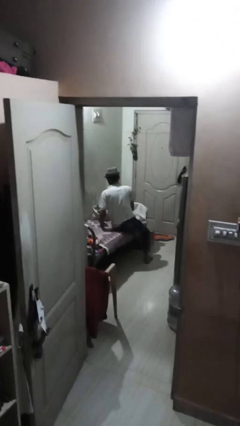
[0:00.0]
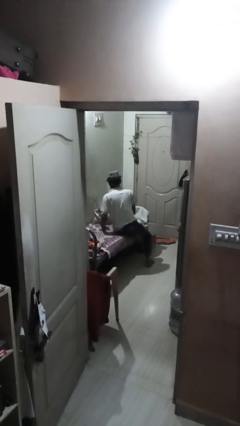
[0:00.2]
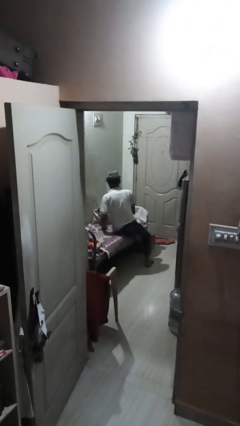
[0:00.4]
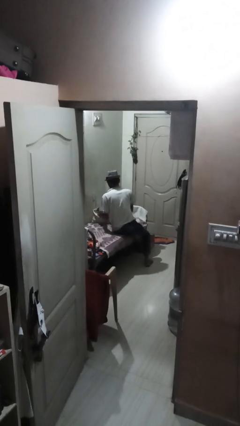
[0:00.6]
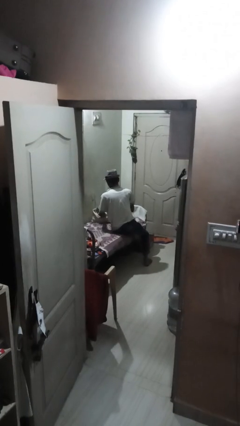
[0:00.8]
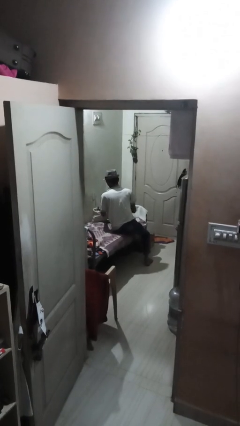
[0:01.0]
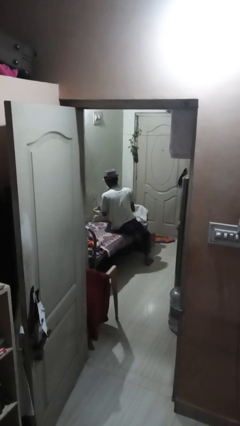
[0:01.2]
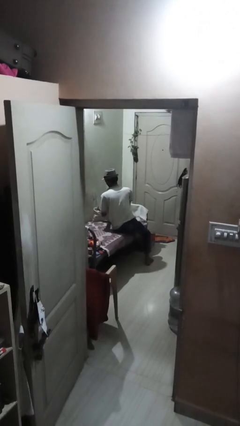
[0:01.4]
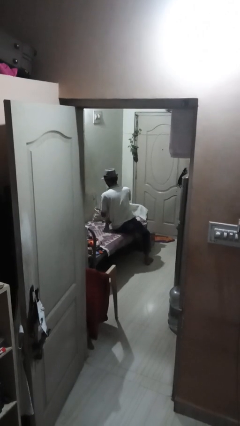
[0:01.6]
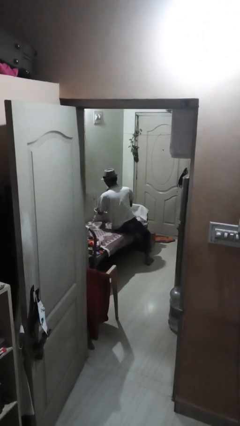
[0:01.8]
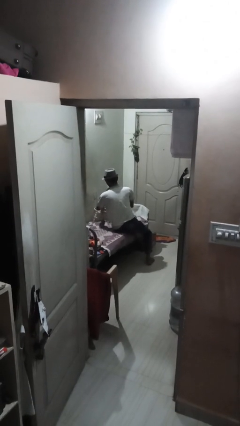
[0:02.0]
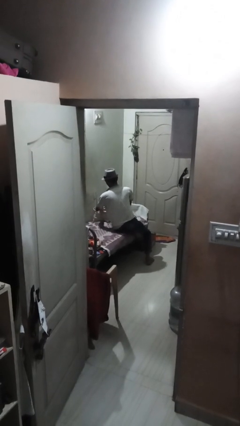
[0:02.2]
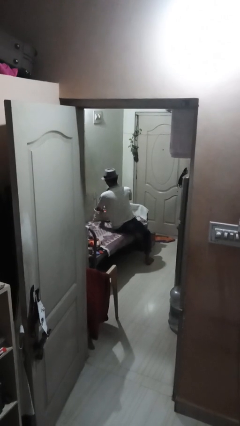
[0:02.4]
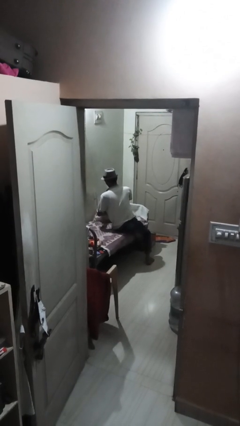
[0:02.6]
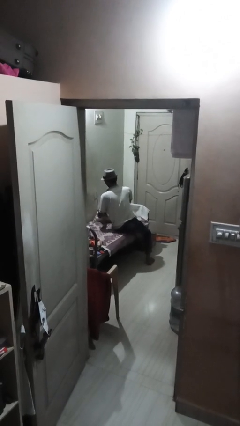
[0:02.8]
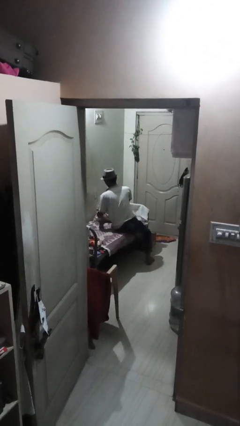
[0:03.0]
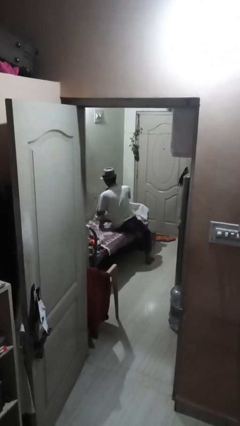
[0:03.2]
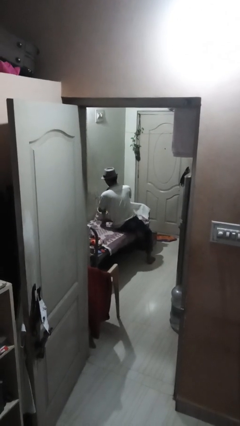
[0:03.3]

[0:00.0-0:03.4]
person searches in bag

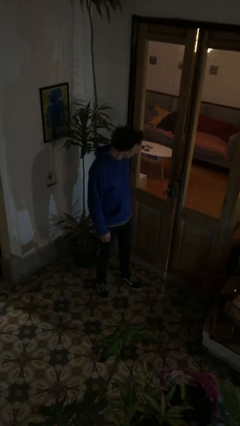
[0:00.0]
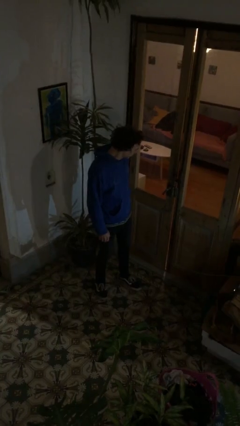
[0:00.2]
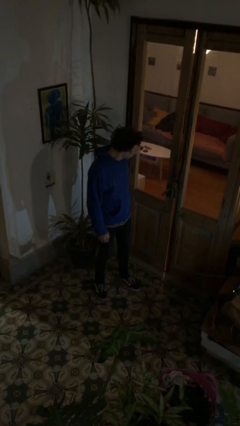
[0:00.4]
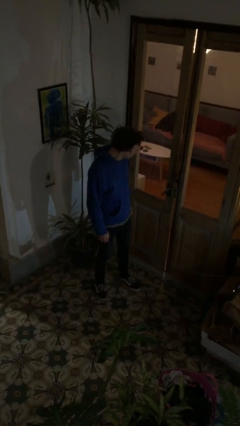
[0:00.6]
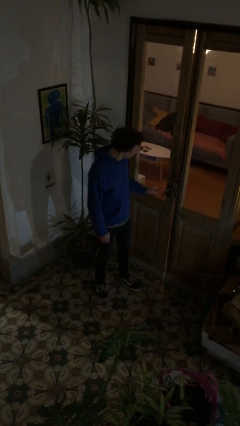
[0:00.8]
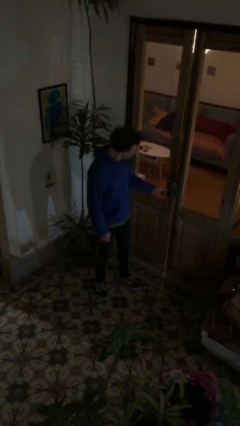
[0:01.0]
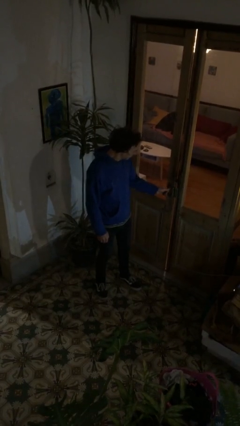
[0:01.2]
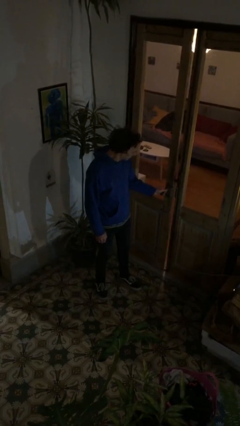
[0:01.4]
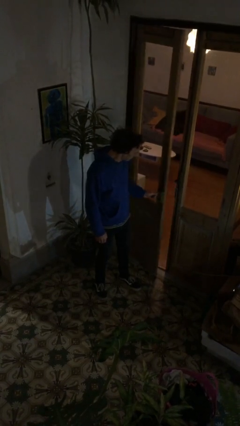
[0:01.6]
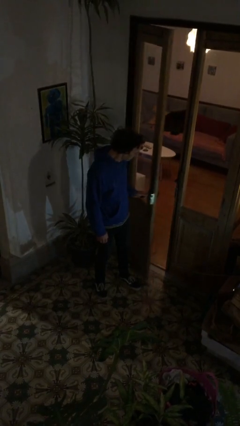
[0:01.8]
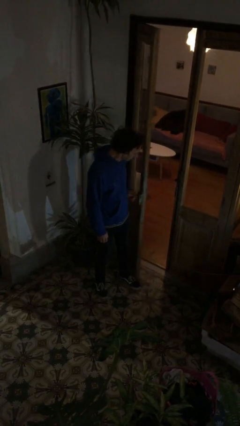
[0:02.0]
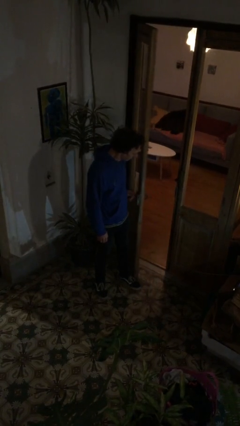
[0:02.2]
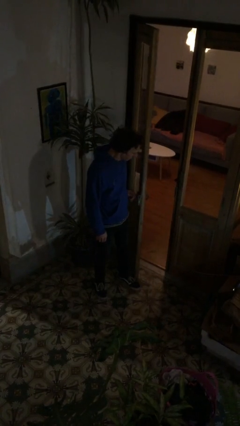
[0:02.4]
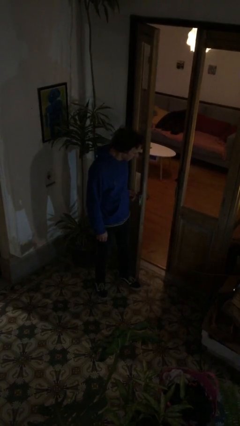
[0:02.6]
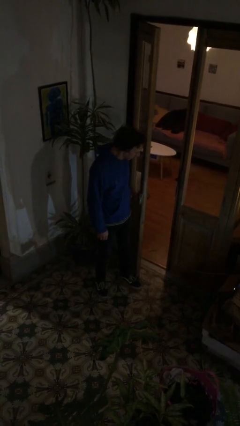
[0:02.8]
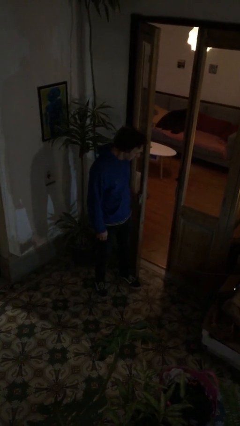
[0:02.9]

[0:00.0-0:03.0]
person opens facility door

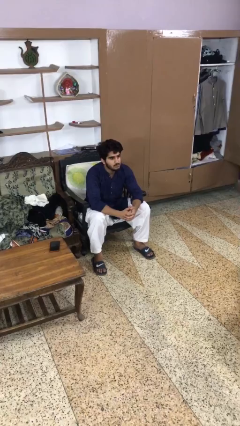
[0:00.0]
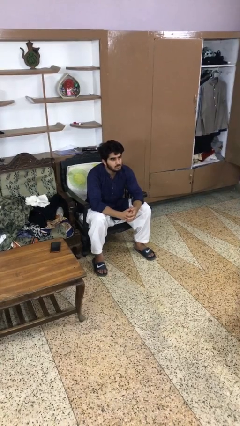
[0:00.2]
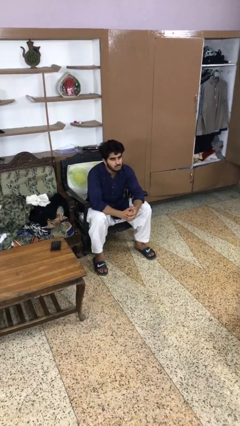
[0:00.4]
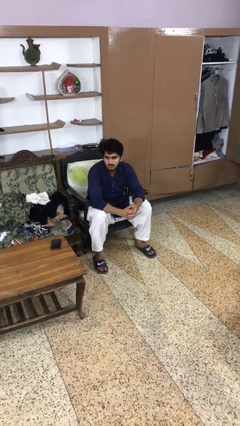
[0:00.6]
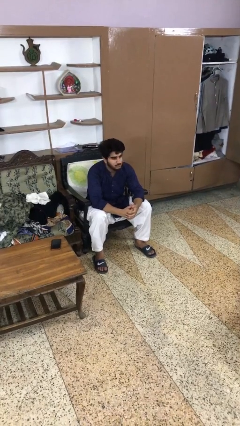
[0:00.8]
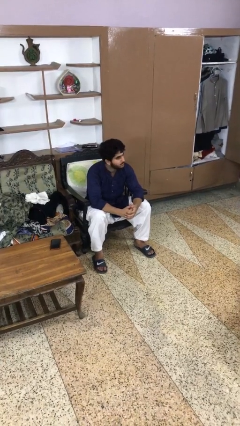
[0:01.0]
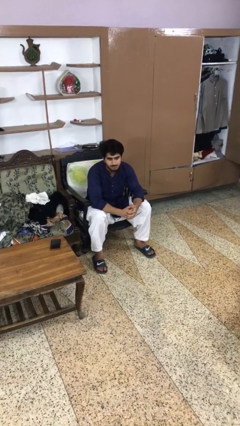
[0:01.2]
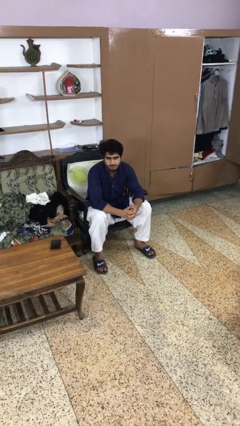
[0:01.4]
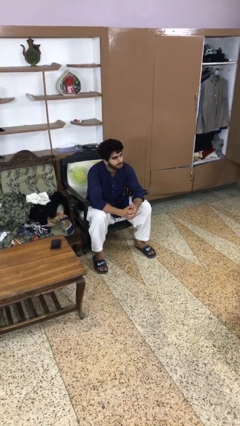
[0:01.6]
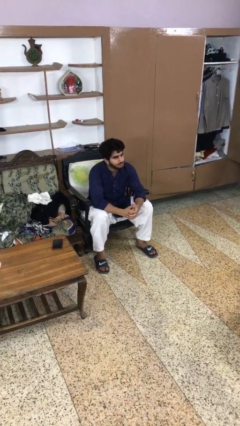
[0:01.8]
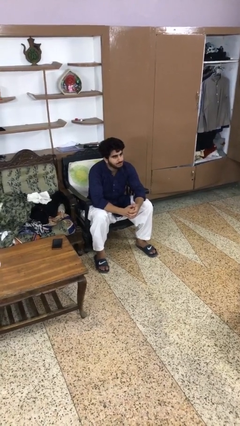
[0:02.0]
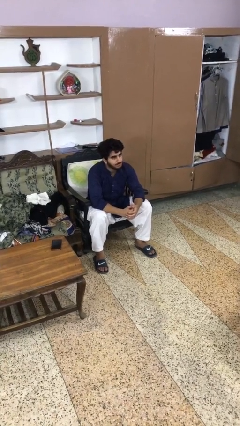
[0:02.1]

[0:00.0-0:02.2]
person shakes head

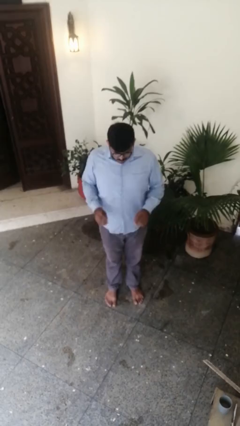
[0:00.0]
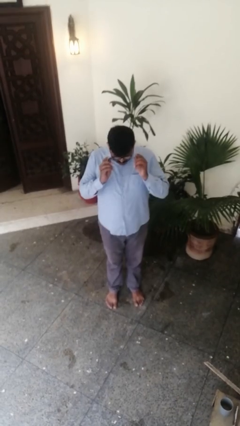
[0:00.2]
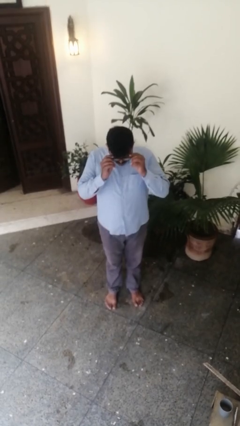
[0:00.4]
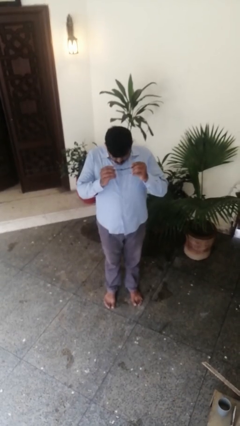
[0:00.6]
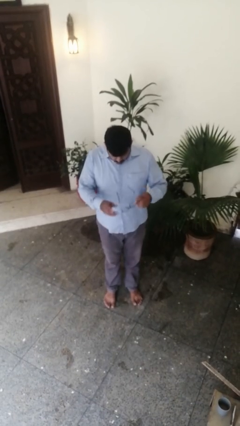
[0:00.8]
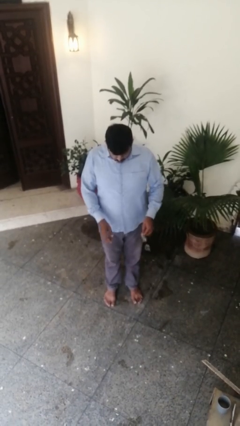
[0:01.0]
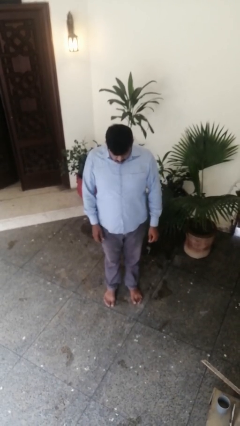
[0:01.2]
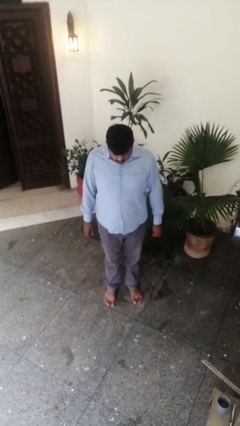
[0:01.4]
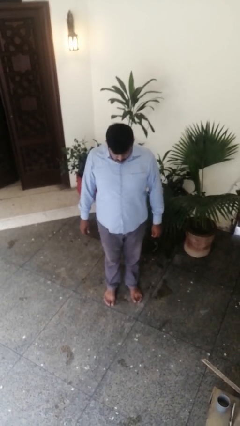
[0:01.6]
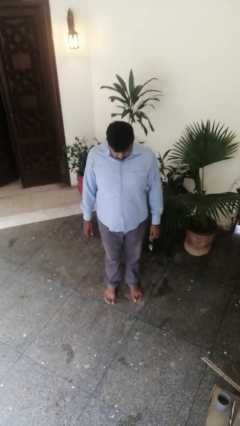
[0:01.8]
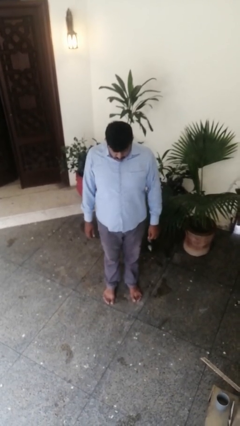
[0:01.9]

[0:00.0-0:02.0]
person takes off glasses

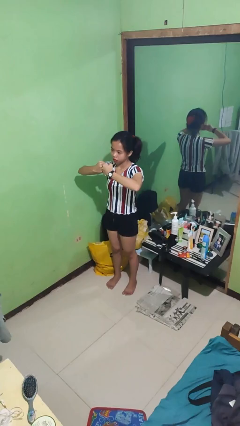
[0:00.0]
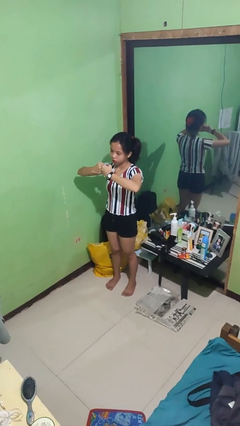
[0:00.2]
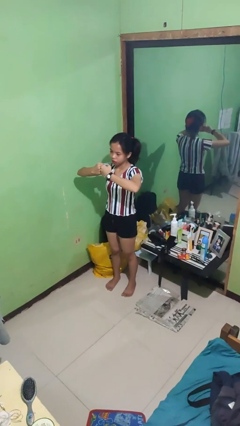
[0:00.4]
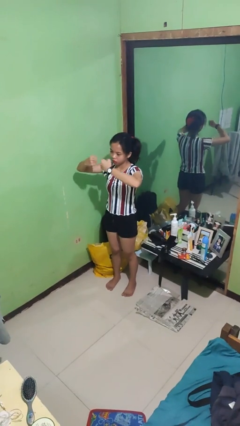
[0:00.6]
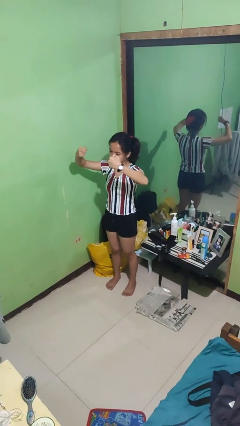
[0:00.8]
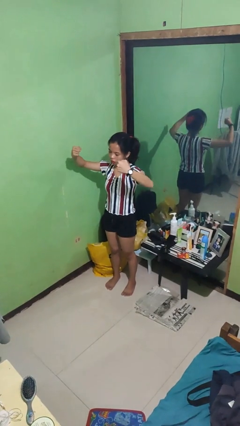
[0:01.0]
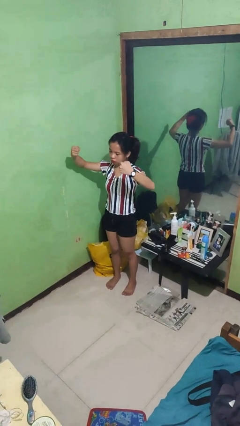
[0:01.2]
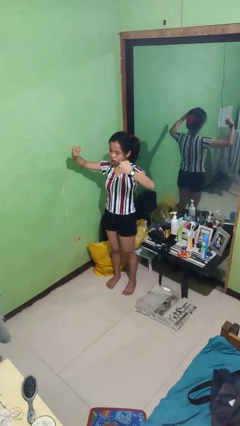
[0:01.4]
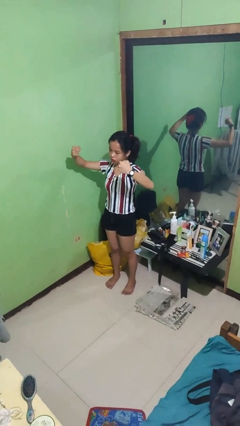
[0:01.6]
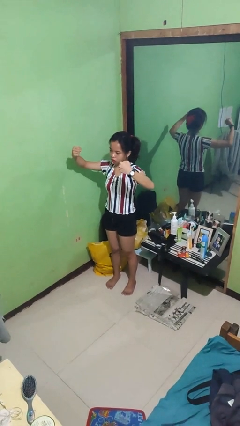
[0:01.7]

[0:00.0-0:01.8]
person gestures zoom in

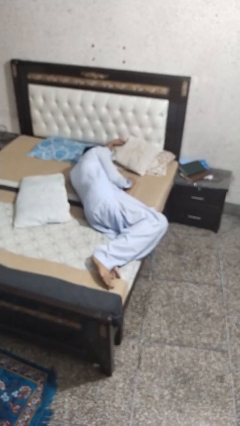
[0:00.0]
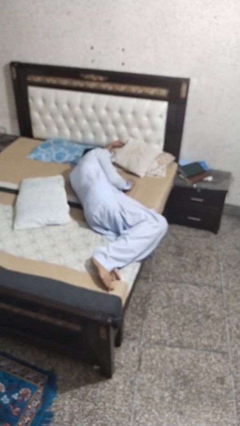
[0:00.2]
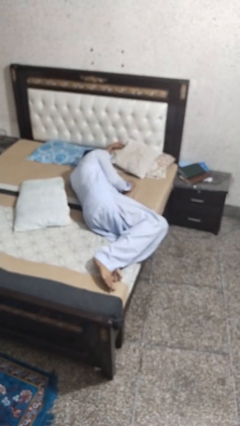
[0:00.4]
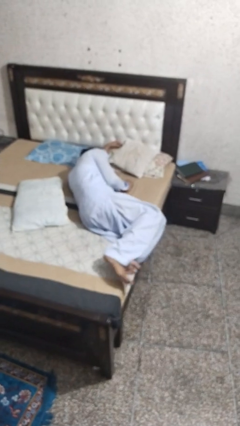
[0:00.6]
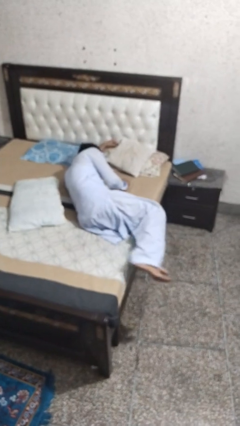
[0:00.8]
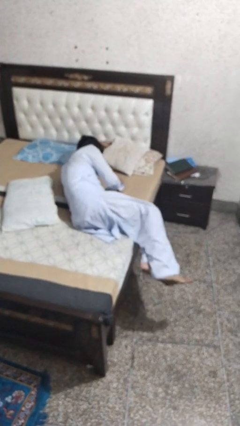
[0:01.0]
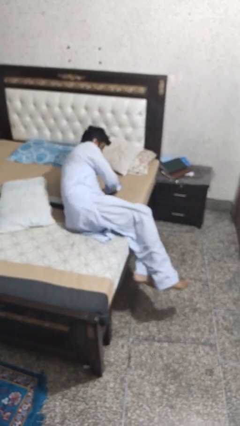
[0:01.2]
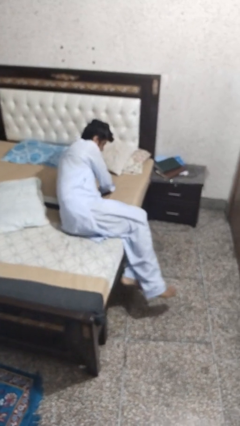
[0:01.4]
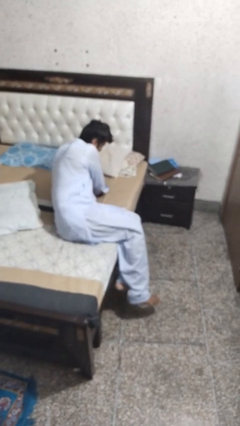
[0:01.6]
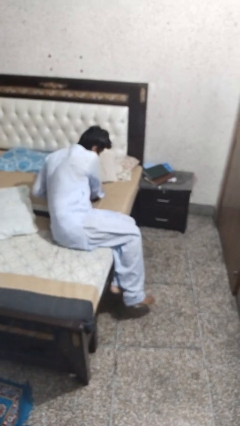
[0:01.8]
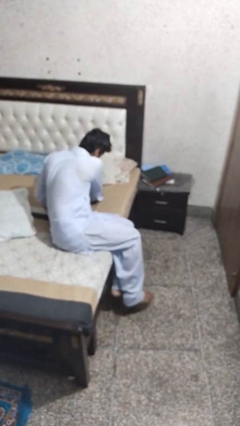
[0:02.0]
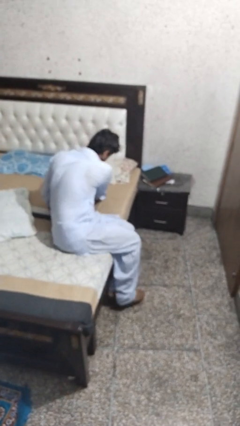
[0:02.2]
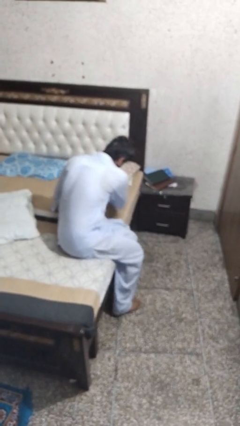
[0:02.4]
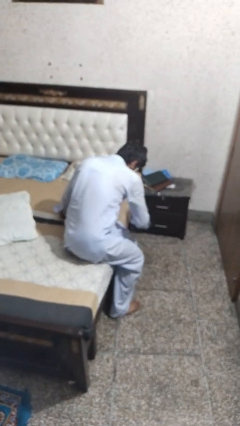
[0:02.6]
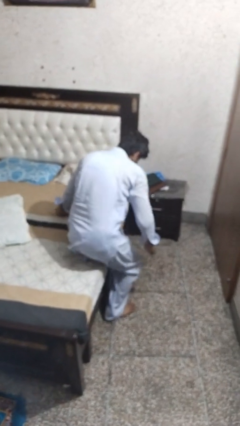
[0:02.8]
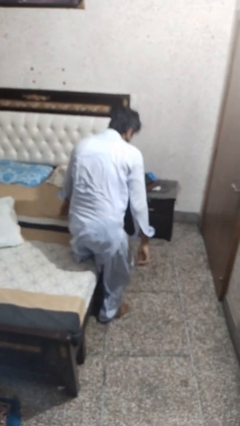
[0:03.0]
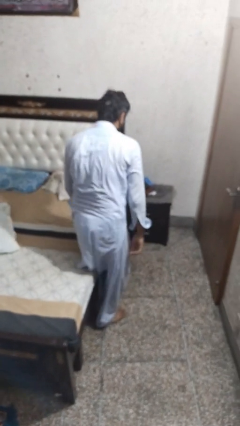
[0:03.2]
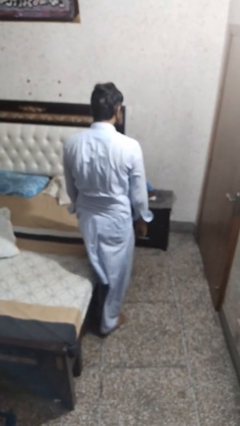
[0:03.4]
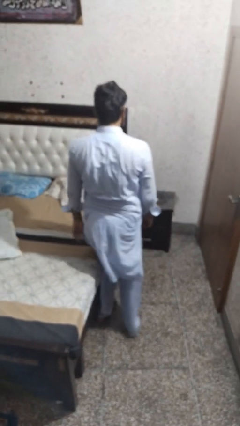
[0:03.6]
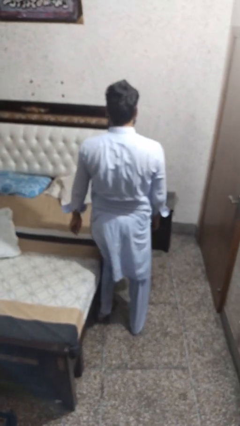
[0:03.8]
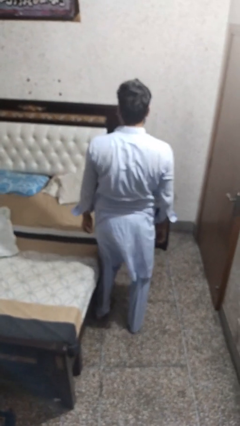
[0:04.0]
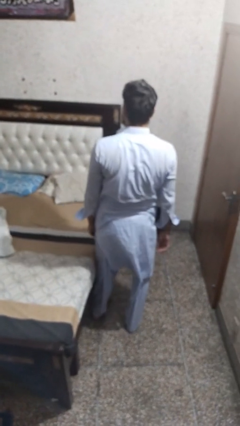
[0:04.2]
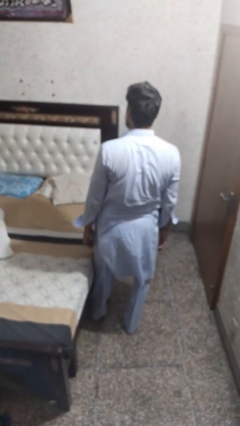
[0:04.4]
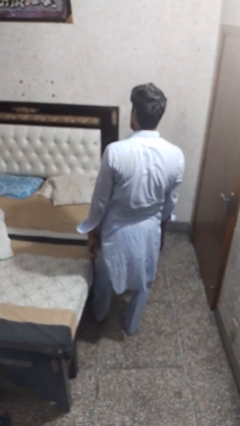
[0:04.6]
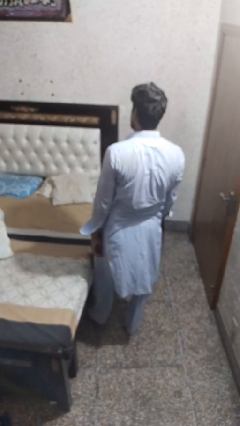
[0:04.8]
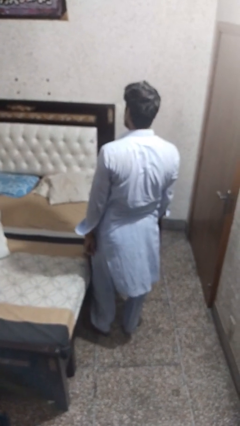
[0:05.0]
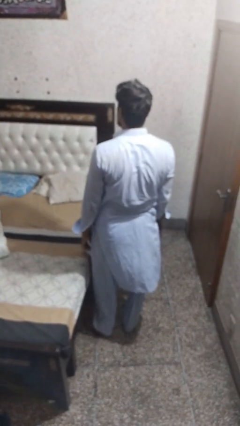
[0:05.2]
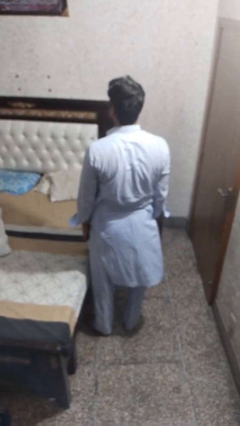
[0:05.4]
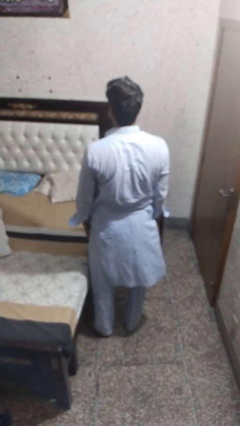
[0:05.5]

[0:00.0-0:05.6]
person stands up
